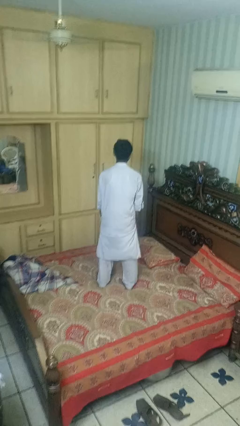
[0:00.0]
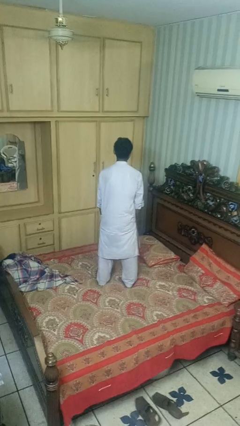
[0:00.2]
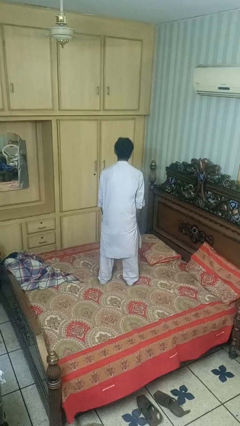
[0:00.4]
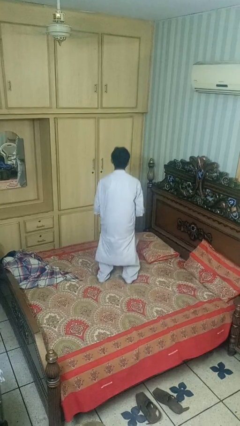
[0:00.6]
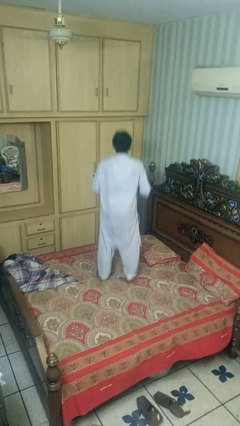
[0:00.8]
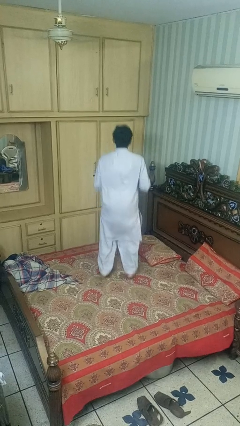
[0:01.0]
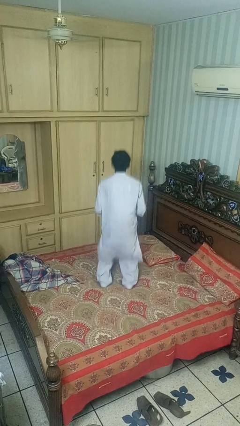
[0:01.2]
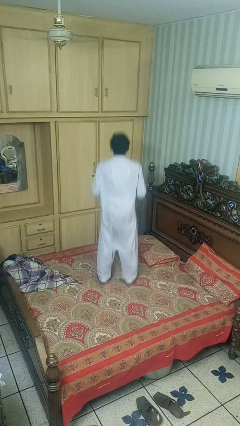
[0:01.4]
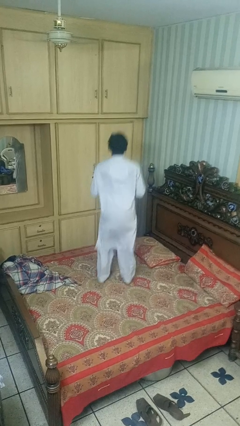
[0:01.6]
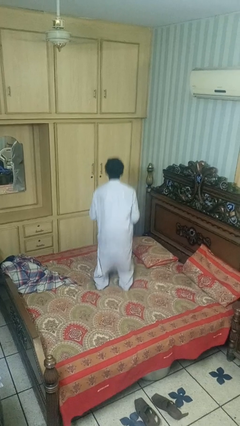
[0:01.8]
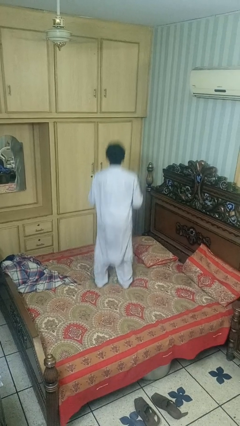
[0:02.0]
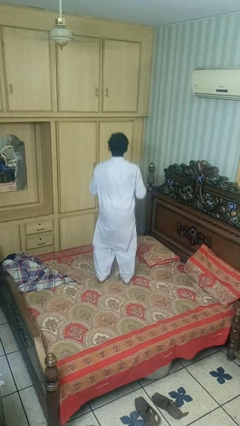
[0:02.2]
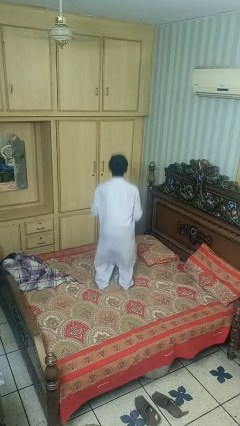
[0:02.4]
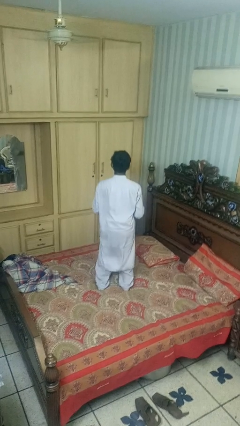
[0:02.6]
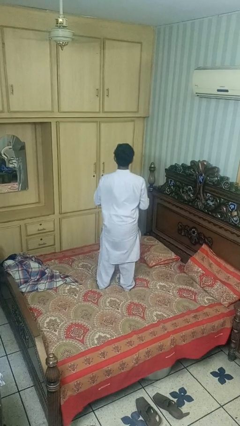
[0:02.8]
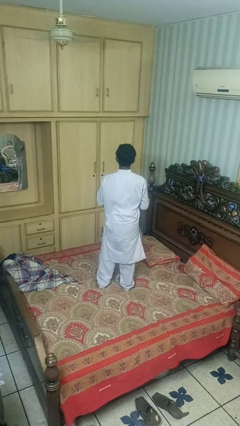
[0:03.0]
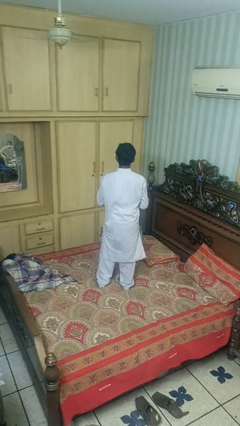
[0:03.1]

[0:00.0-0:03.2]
person jumps on bed

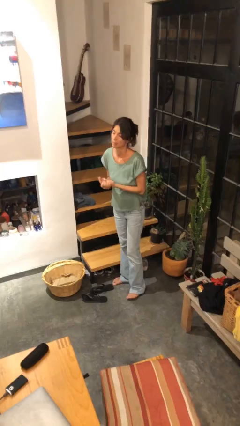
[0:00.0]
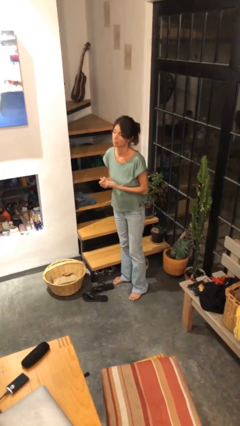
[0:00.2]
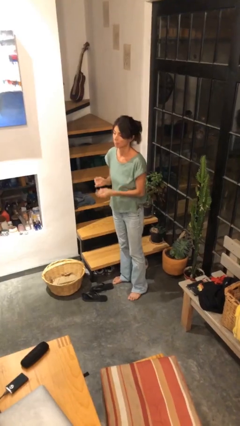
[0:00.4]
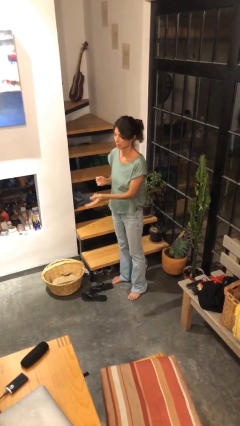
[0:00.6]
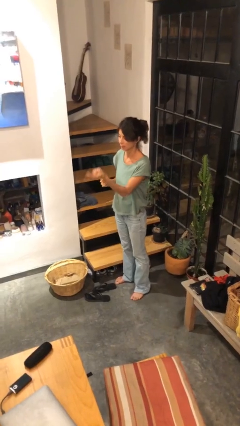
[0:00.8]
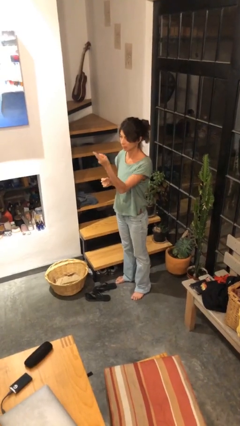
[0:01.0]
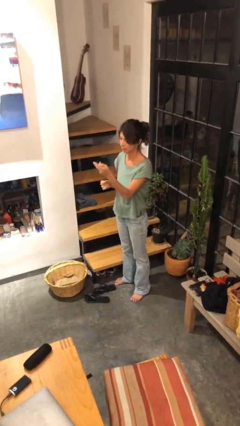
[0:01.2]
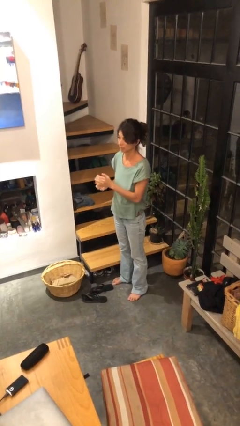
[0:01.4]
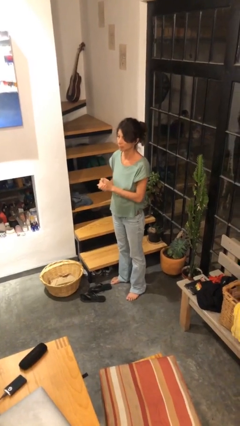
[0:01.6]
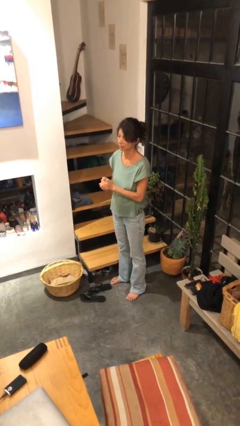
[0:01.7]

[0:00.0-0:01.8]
person gestures swipe up

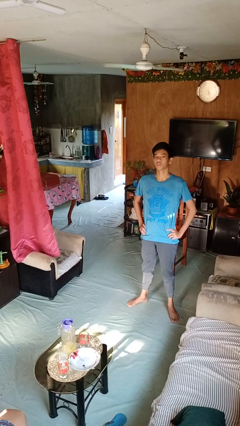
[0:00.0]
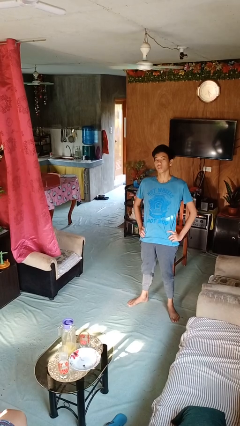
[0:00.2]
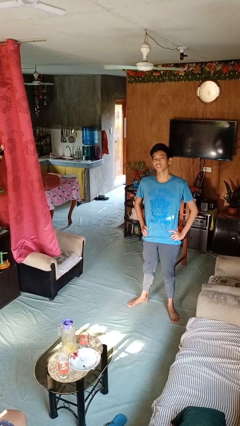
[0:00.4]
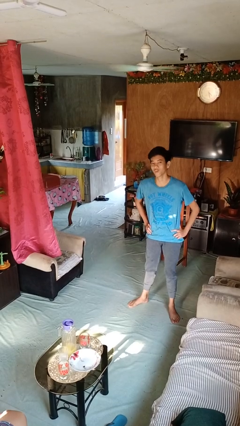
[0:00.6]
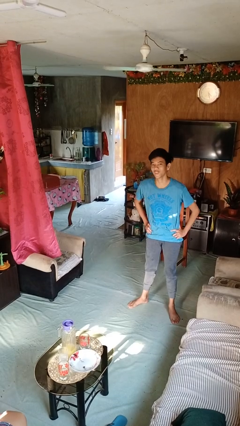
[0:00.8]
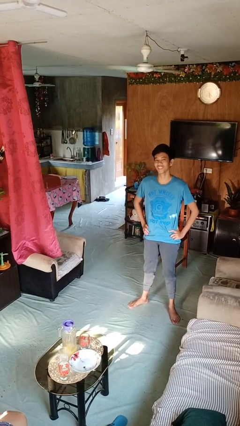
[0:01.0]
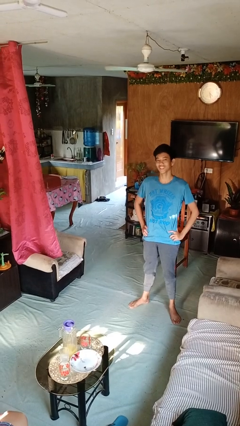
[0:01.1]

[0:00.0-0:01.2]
person wiggles hips

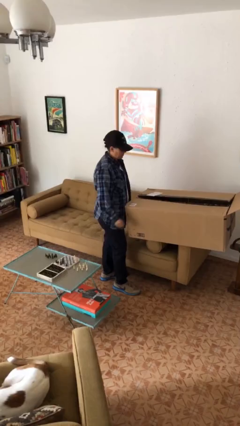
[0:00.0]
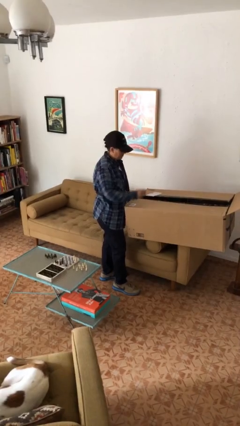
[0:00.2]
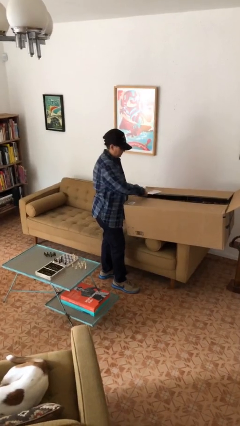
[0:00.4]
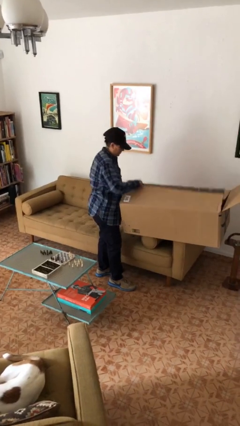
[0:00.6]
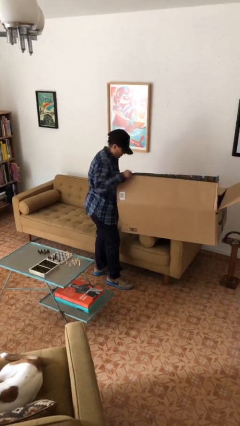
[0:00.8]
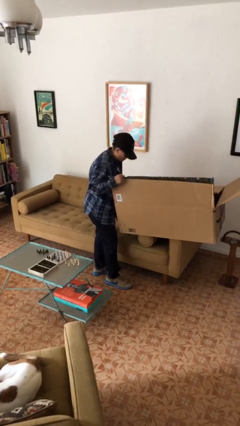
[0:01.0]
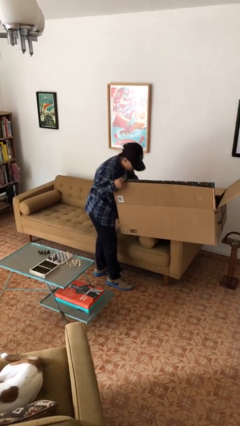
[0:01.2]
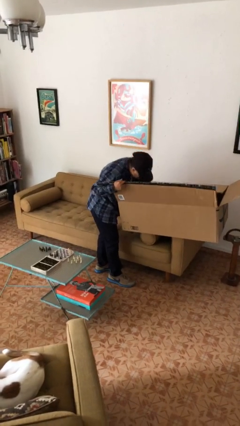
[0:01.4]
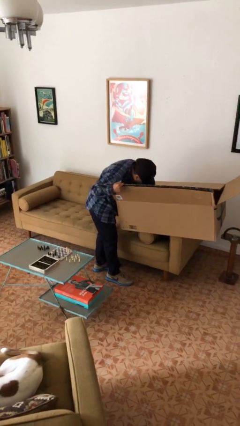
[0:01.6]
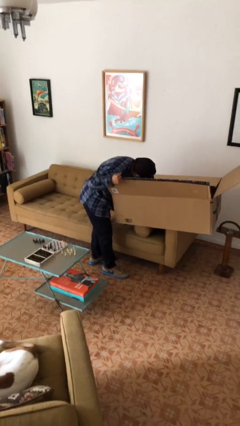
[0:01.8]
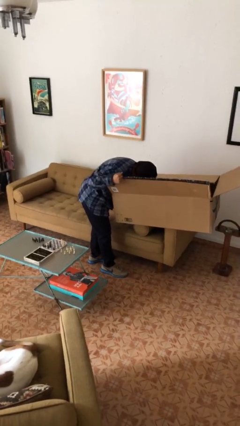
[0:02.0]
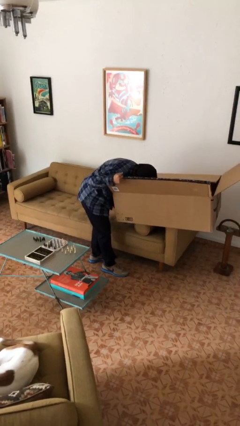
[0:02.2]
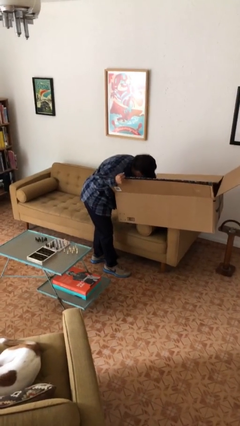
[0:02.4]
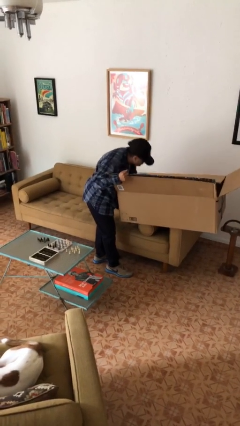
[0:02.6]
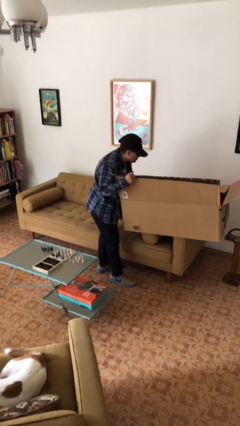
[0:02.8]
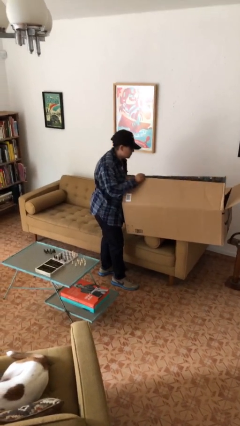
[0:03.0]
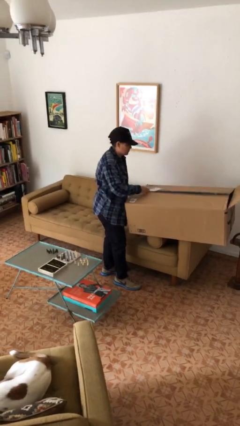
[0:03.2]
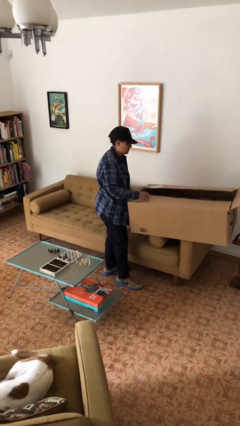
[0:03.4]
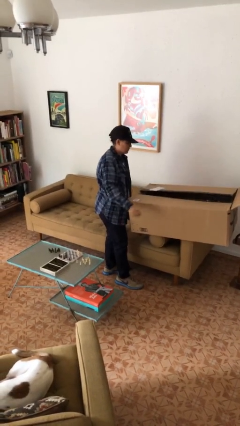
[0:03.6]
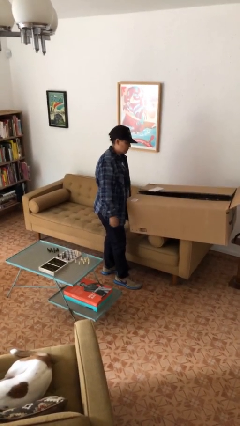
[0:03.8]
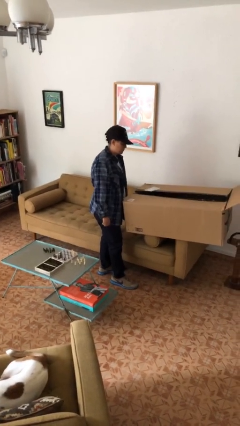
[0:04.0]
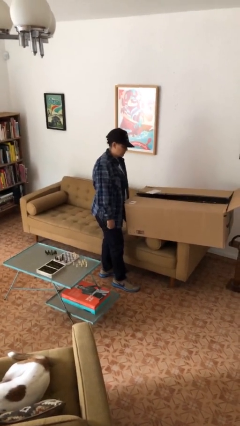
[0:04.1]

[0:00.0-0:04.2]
person searches in box

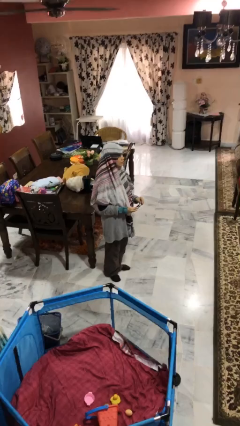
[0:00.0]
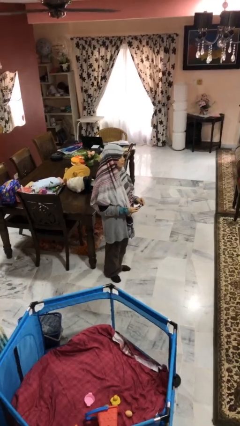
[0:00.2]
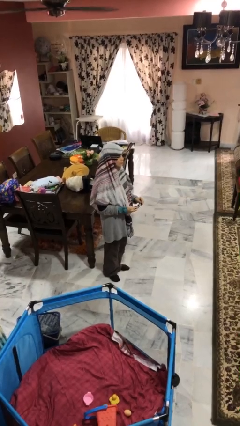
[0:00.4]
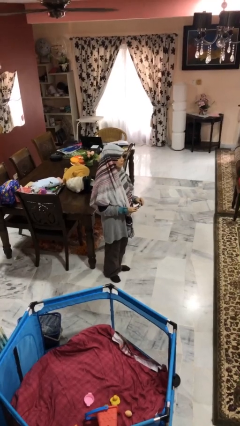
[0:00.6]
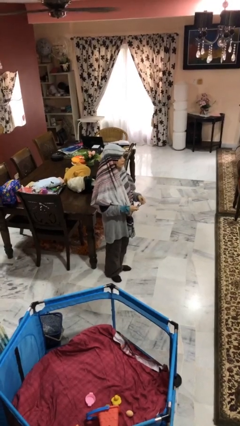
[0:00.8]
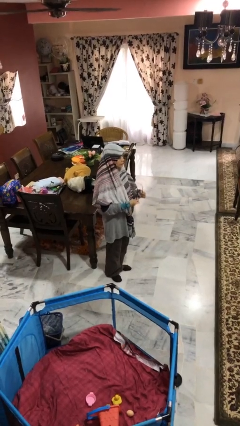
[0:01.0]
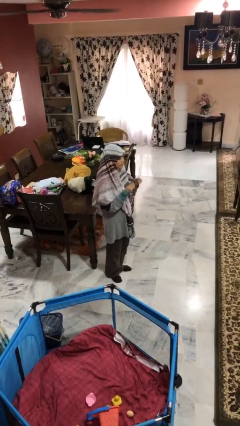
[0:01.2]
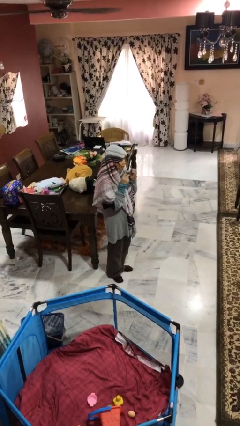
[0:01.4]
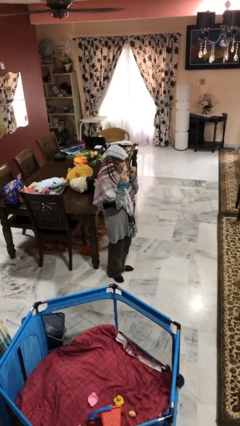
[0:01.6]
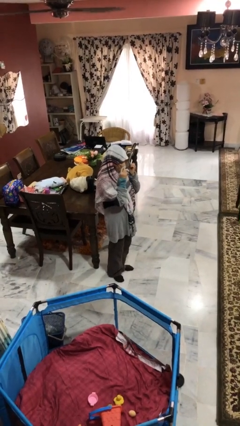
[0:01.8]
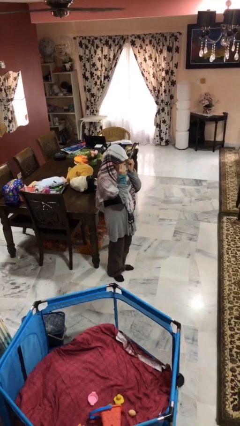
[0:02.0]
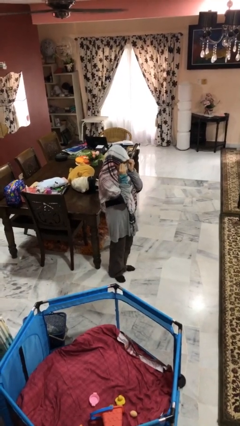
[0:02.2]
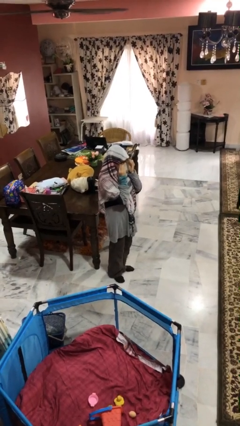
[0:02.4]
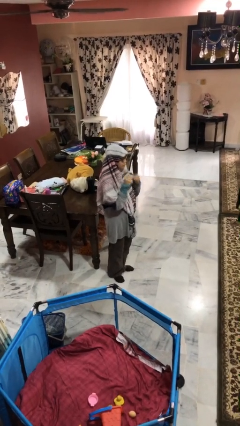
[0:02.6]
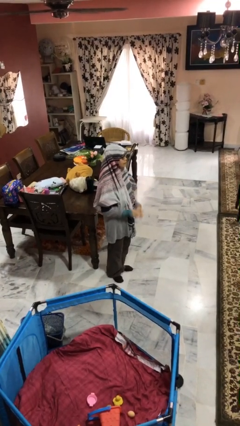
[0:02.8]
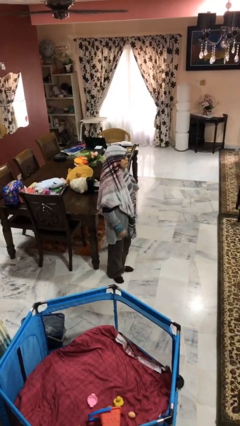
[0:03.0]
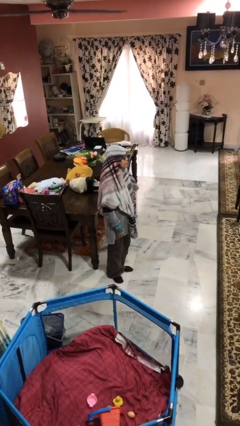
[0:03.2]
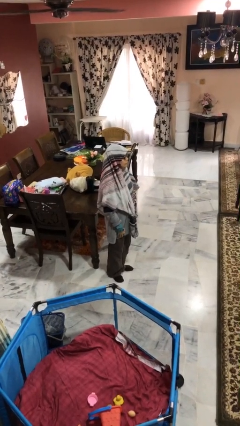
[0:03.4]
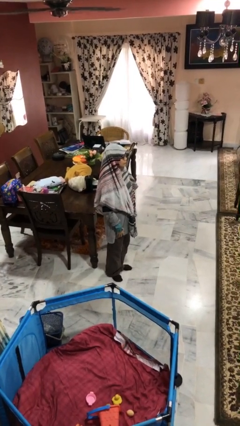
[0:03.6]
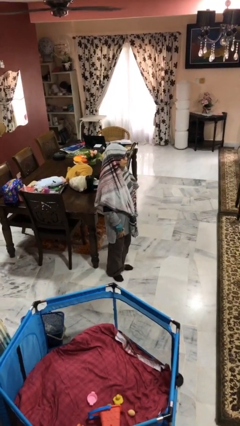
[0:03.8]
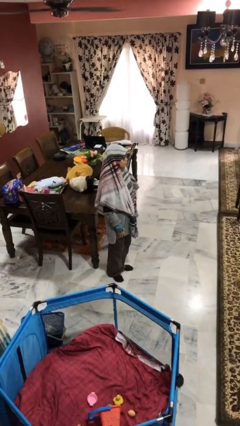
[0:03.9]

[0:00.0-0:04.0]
person puts on glasses

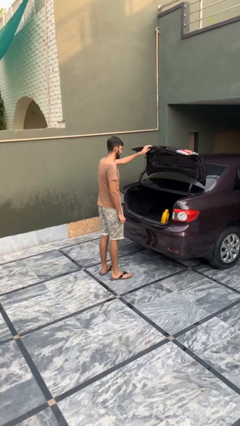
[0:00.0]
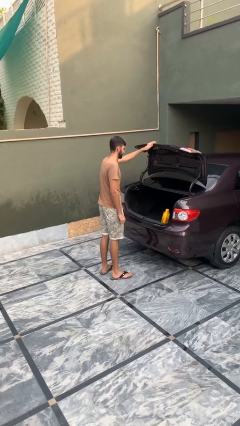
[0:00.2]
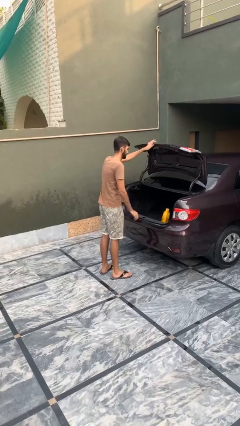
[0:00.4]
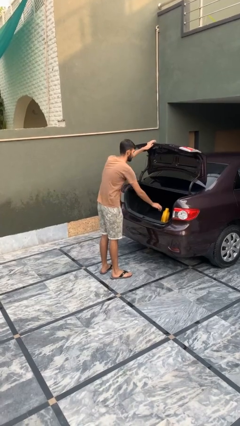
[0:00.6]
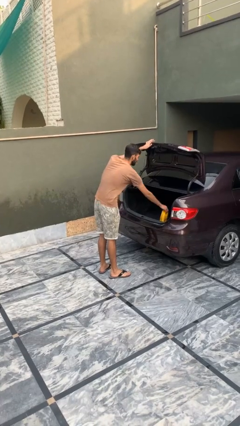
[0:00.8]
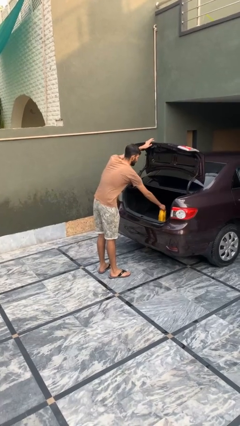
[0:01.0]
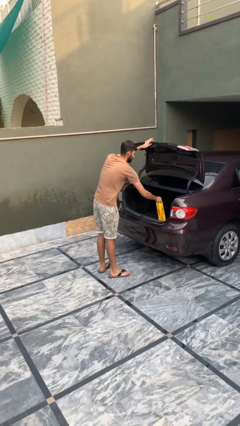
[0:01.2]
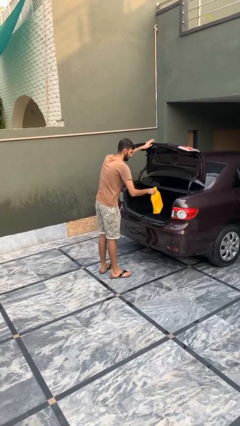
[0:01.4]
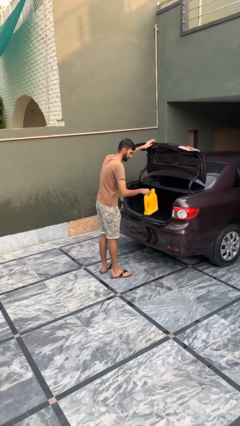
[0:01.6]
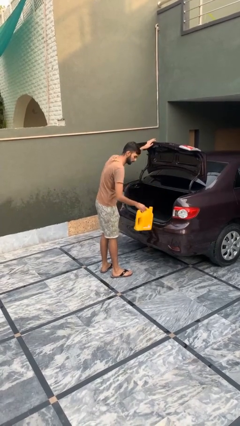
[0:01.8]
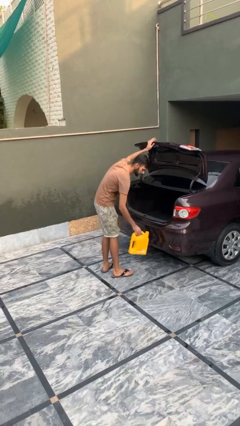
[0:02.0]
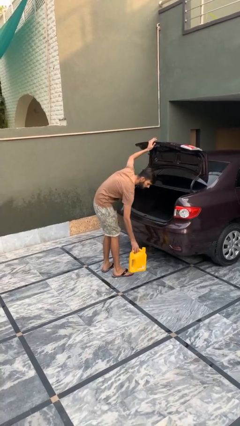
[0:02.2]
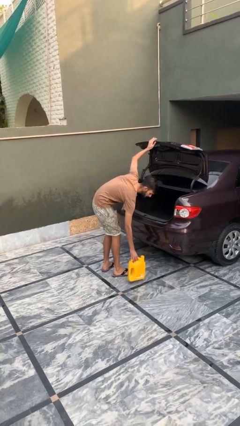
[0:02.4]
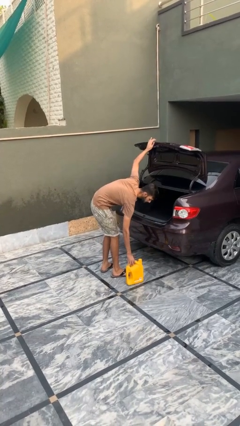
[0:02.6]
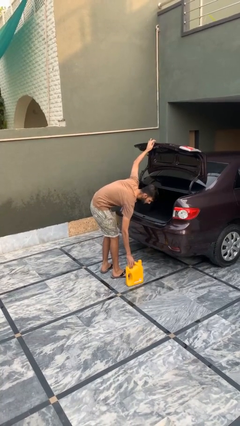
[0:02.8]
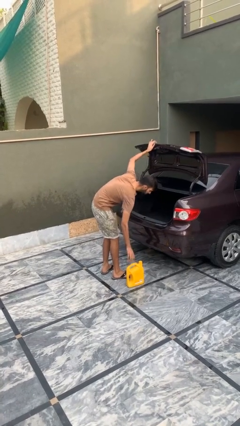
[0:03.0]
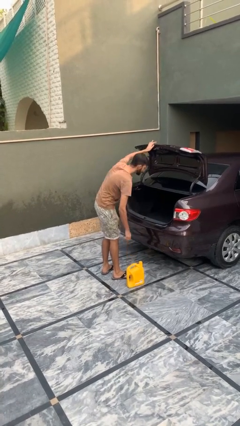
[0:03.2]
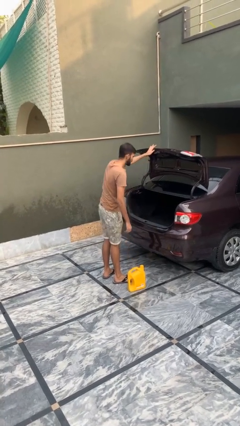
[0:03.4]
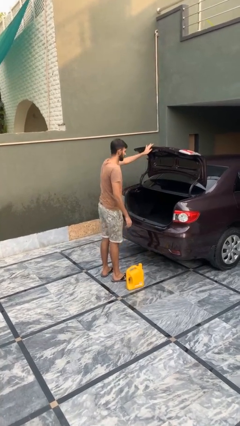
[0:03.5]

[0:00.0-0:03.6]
person unloads car
